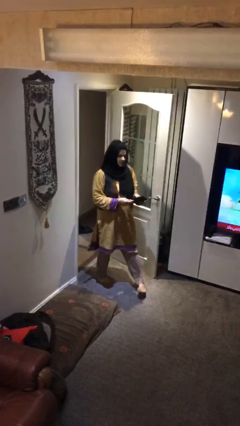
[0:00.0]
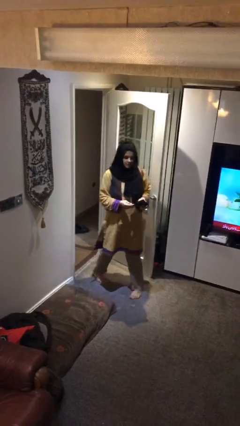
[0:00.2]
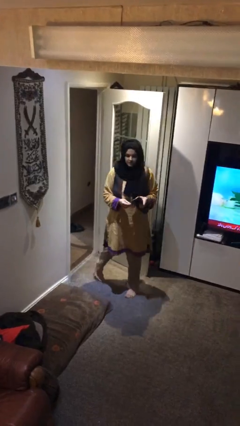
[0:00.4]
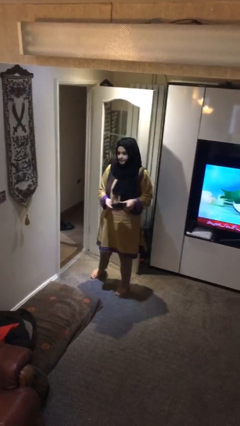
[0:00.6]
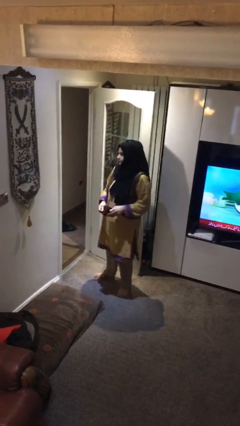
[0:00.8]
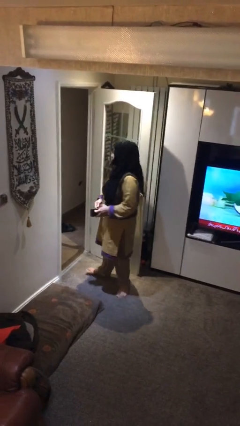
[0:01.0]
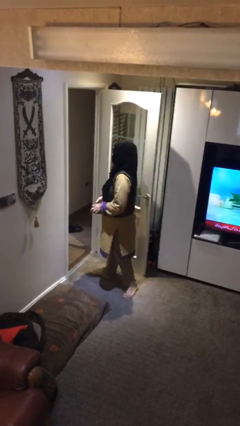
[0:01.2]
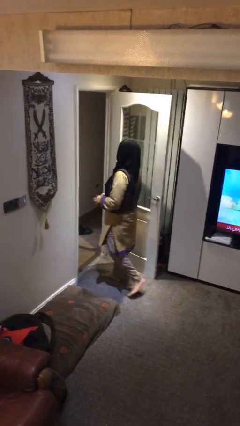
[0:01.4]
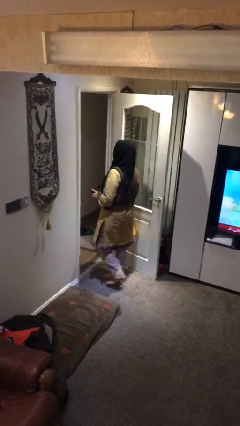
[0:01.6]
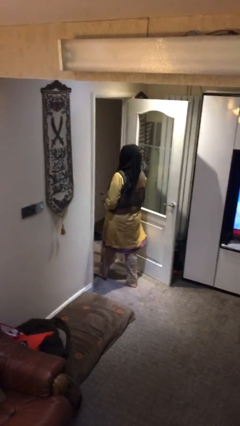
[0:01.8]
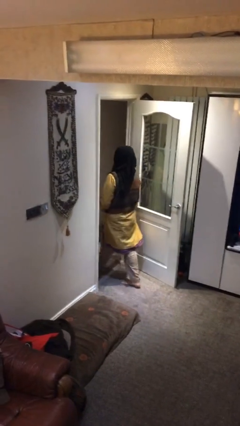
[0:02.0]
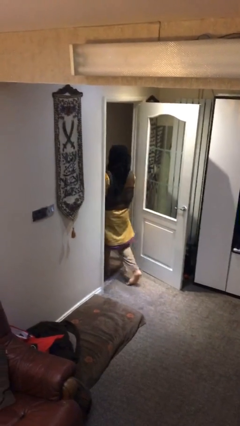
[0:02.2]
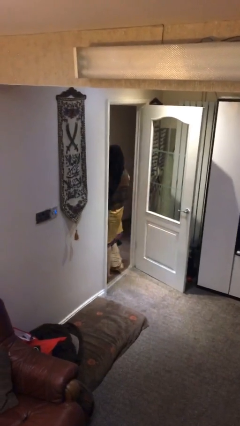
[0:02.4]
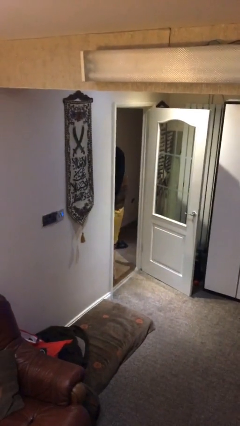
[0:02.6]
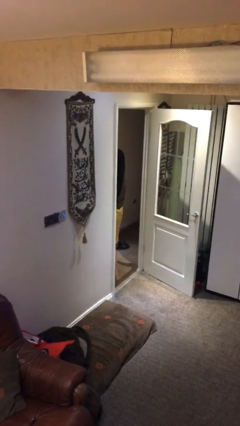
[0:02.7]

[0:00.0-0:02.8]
person exits scene through structure

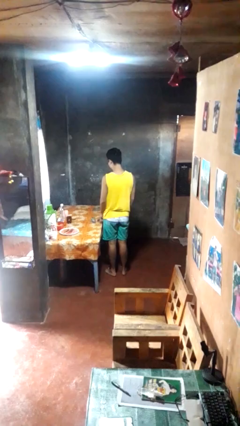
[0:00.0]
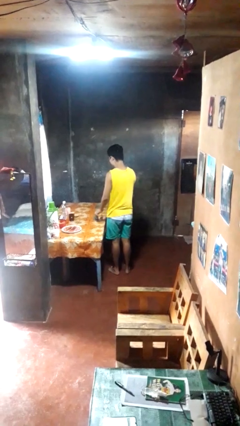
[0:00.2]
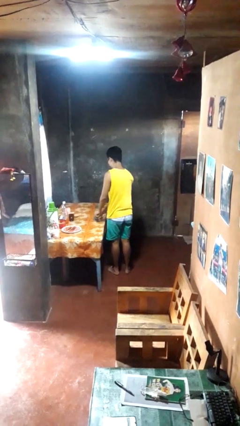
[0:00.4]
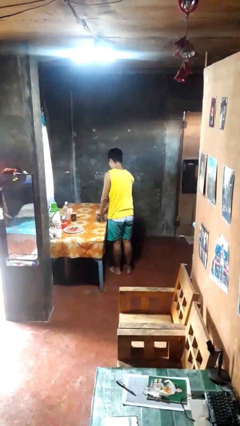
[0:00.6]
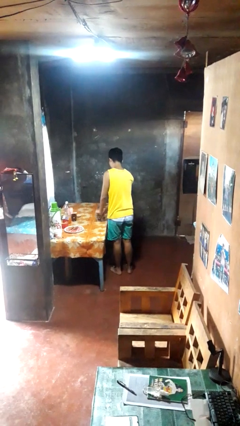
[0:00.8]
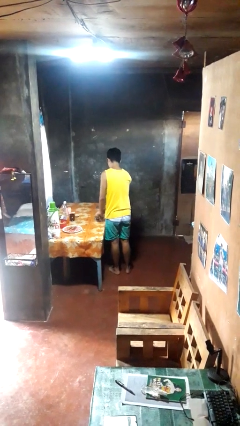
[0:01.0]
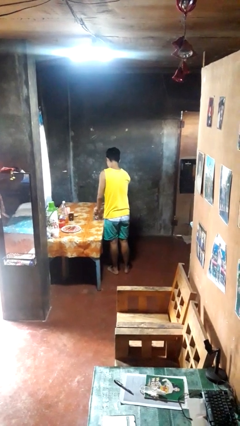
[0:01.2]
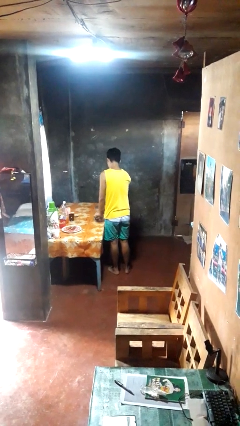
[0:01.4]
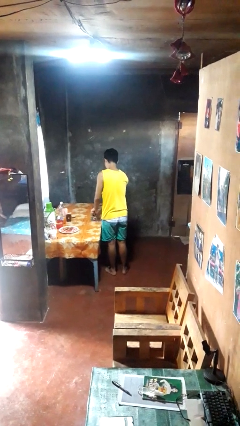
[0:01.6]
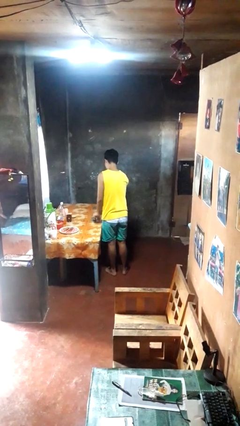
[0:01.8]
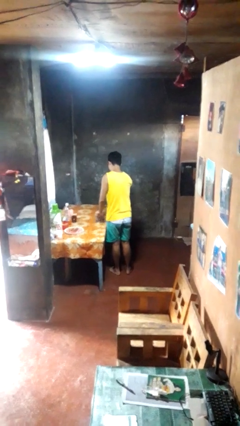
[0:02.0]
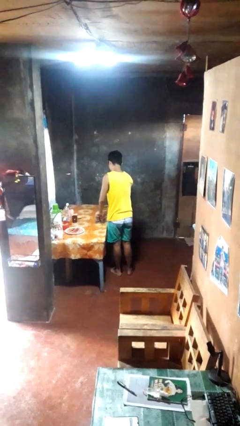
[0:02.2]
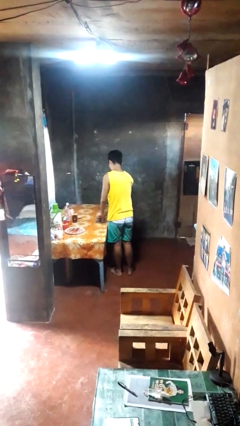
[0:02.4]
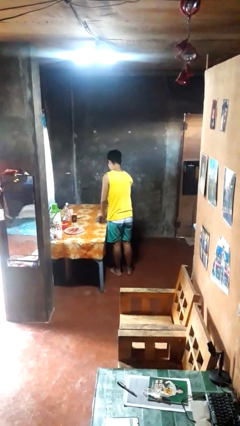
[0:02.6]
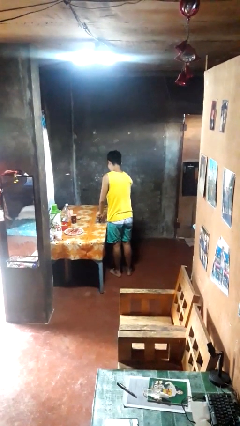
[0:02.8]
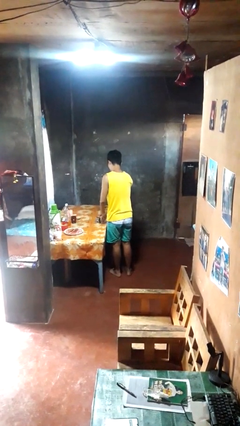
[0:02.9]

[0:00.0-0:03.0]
person opens can with can opener

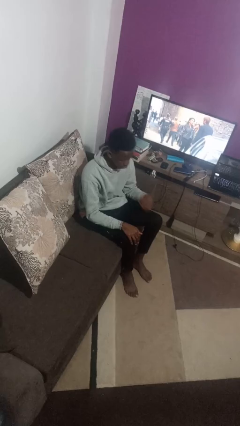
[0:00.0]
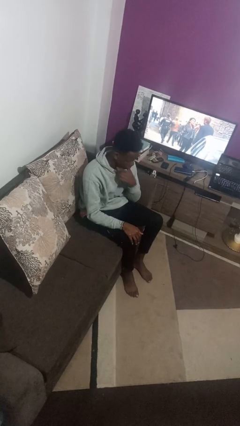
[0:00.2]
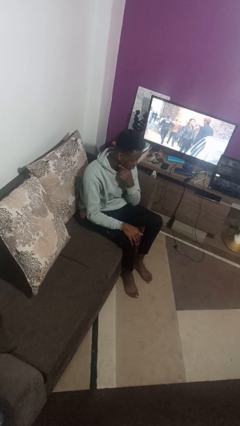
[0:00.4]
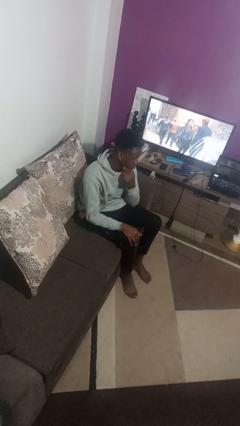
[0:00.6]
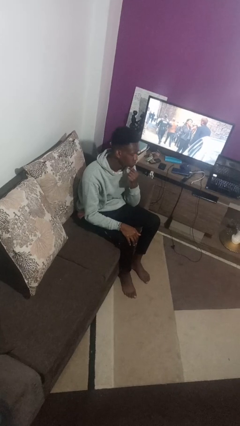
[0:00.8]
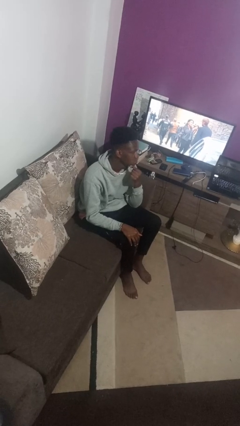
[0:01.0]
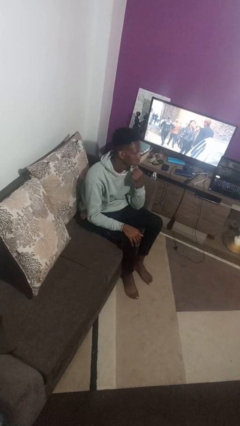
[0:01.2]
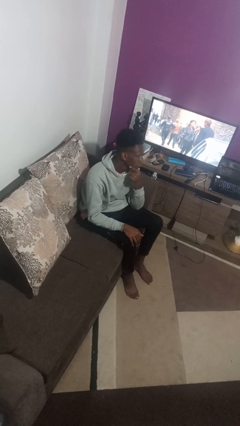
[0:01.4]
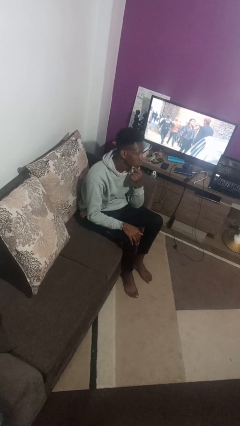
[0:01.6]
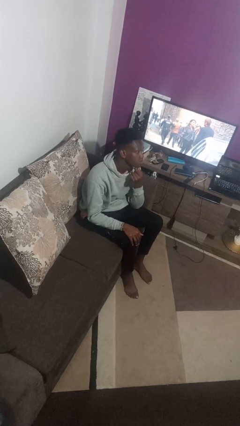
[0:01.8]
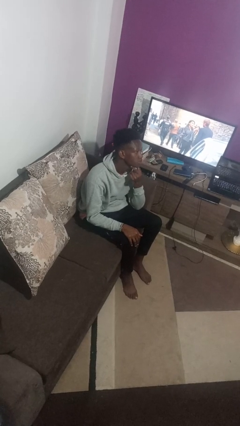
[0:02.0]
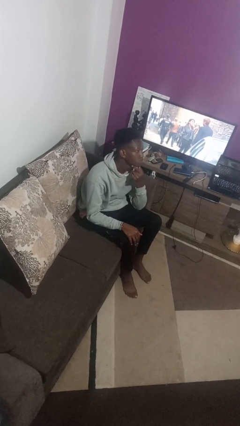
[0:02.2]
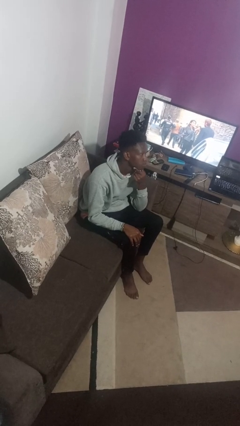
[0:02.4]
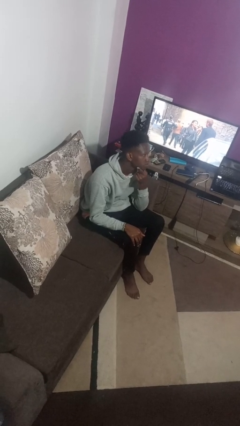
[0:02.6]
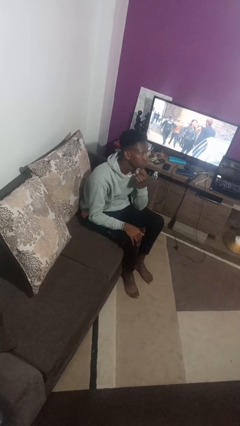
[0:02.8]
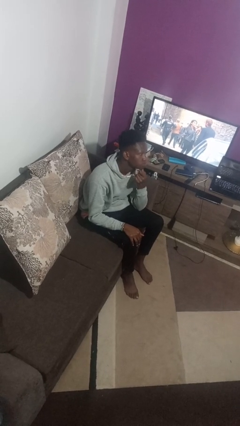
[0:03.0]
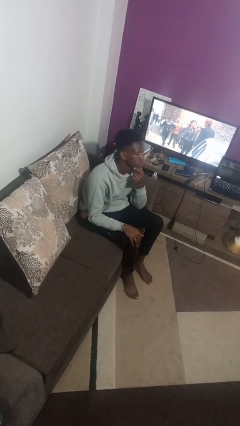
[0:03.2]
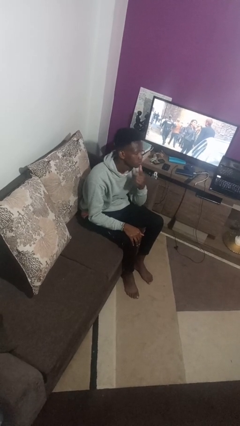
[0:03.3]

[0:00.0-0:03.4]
person strokes chin

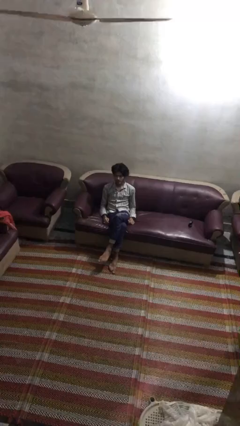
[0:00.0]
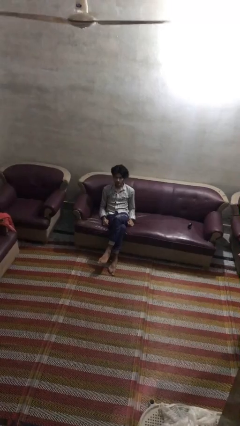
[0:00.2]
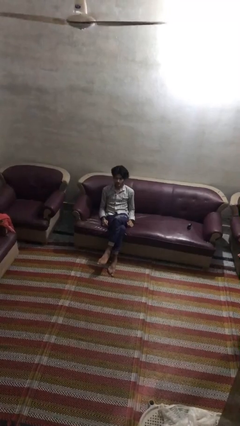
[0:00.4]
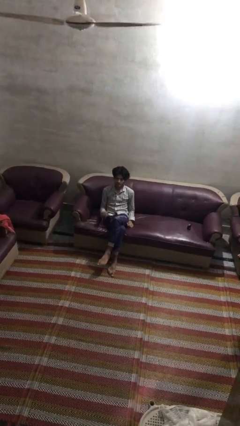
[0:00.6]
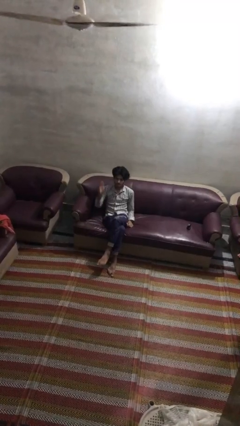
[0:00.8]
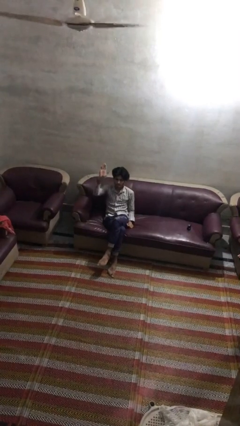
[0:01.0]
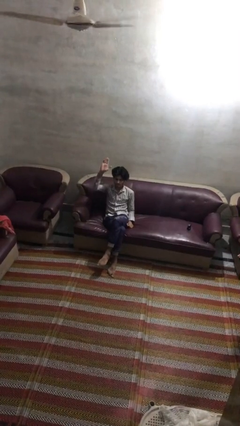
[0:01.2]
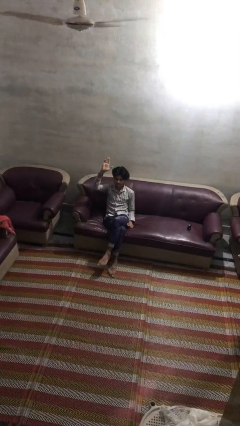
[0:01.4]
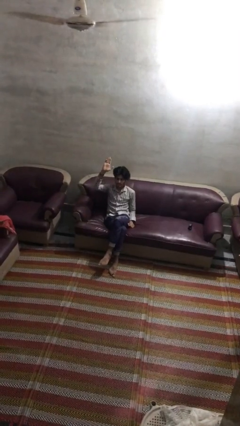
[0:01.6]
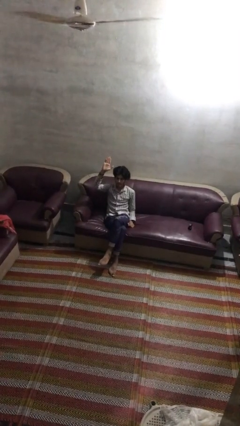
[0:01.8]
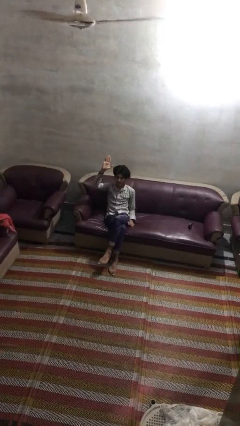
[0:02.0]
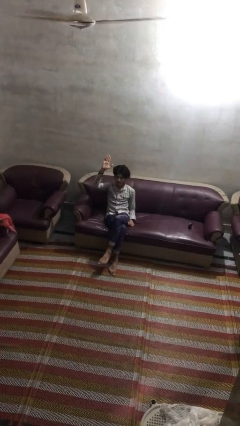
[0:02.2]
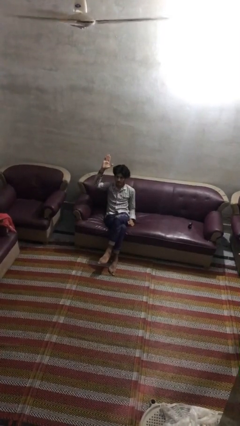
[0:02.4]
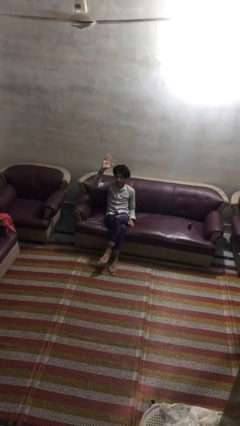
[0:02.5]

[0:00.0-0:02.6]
person gestures raise hand

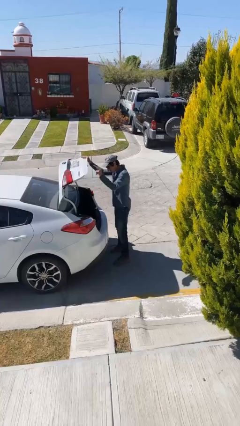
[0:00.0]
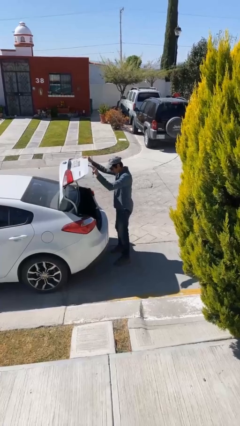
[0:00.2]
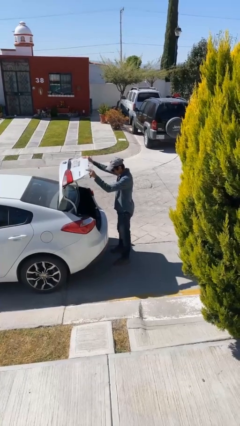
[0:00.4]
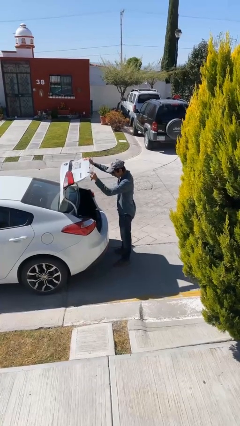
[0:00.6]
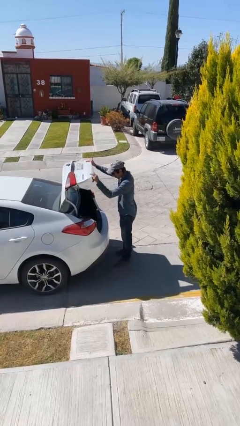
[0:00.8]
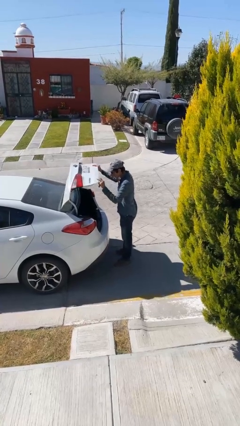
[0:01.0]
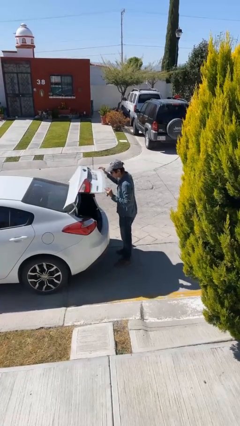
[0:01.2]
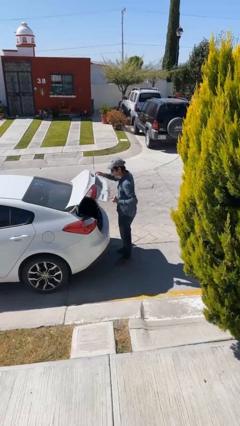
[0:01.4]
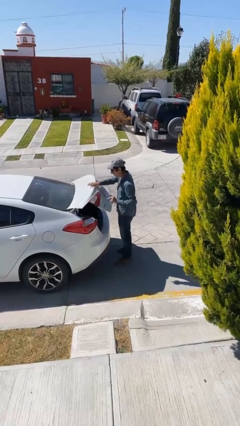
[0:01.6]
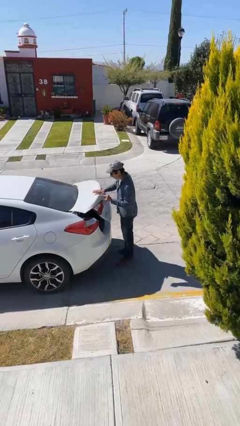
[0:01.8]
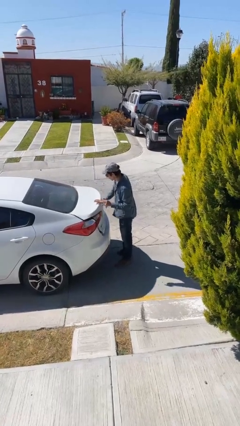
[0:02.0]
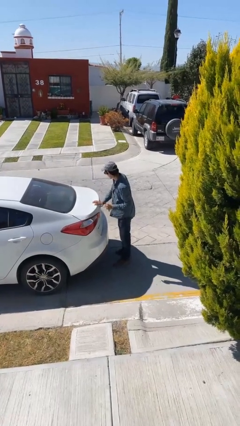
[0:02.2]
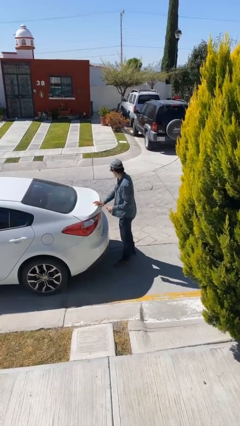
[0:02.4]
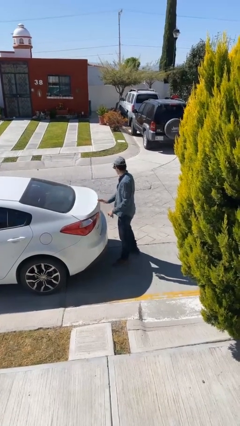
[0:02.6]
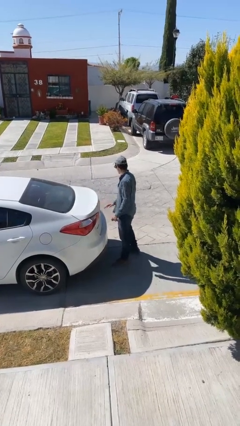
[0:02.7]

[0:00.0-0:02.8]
person closes car trunk

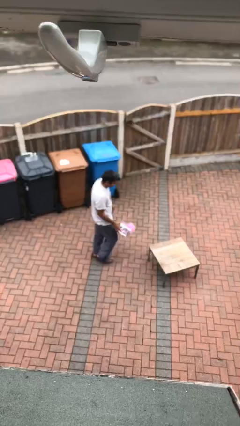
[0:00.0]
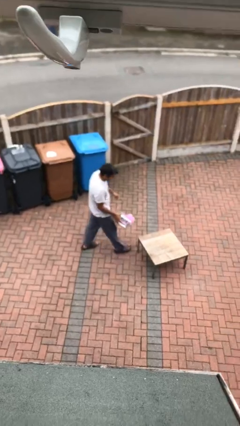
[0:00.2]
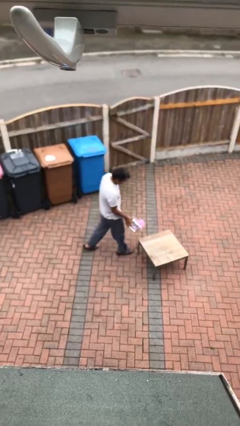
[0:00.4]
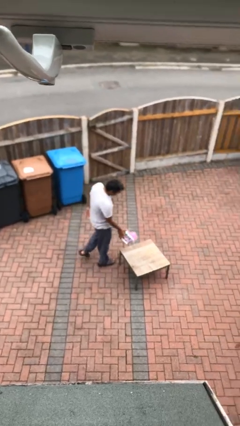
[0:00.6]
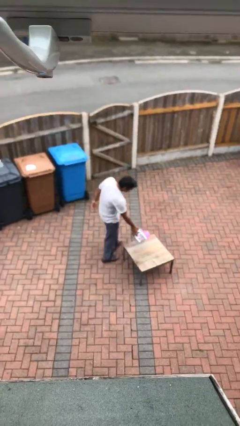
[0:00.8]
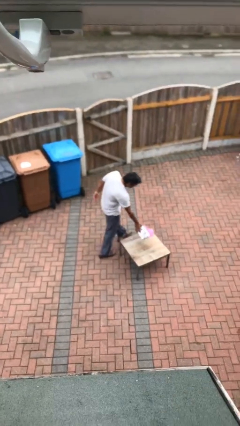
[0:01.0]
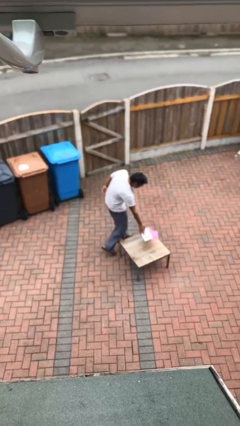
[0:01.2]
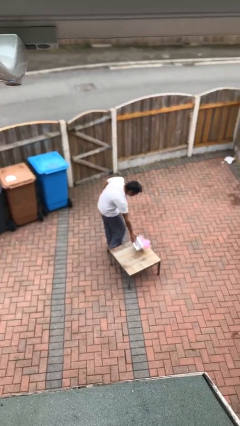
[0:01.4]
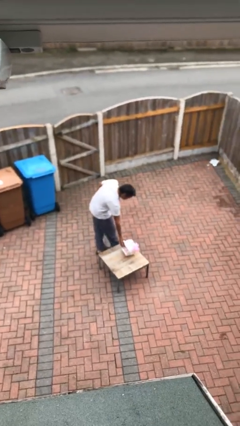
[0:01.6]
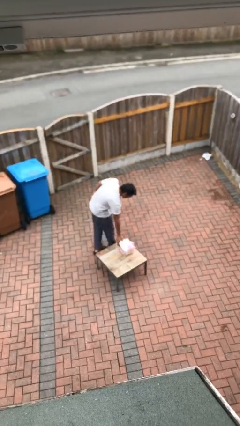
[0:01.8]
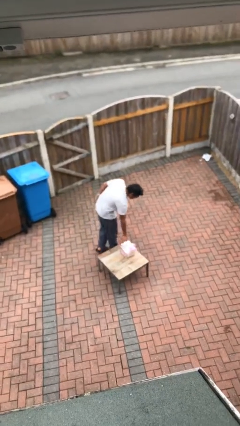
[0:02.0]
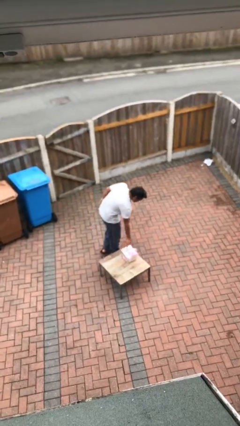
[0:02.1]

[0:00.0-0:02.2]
person puts down object on table

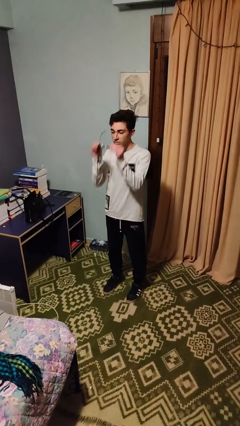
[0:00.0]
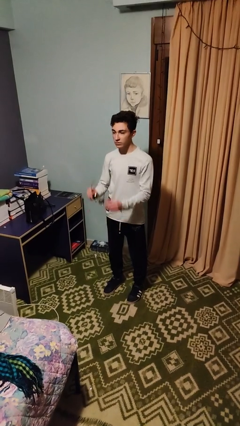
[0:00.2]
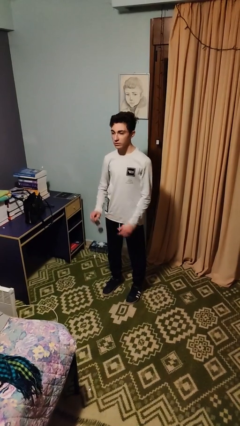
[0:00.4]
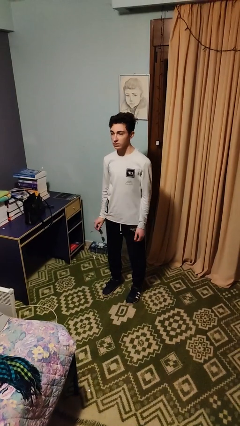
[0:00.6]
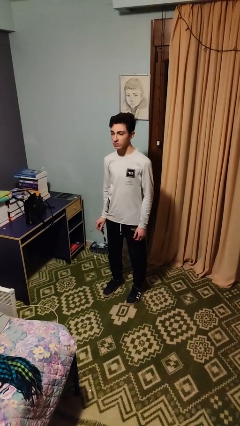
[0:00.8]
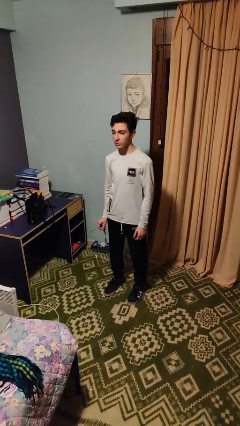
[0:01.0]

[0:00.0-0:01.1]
person takes off sunglasses
